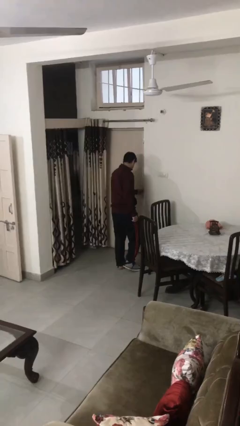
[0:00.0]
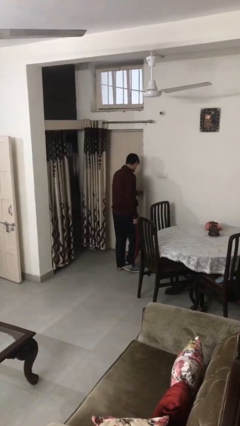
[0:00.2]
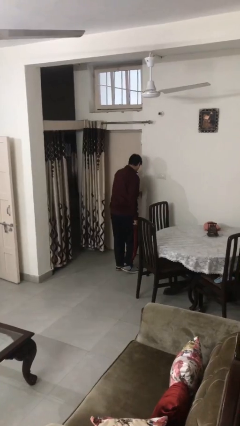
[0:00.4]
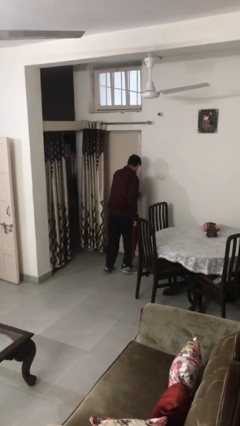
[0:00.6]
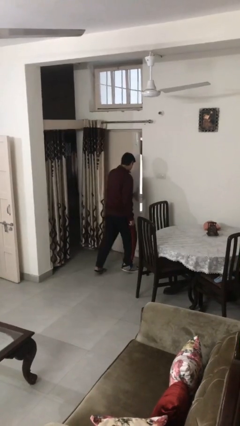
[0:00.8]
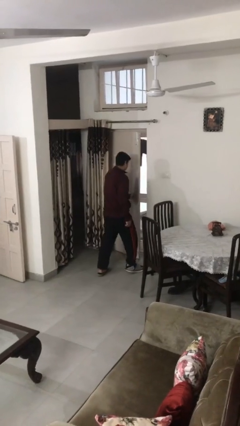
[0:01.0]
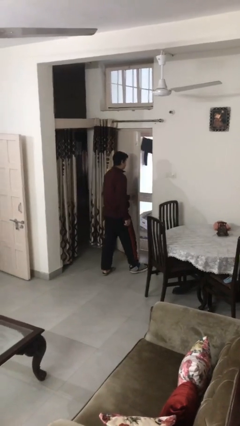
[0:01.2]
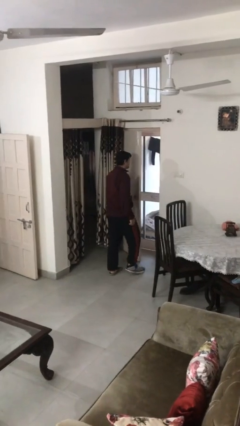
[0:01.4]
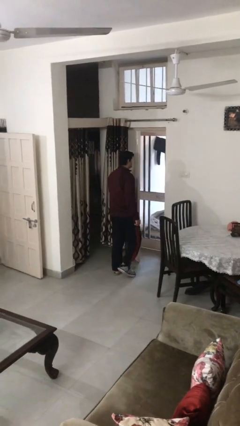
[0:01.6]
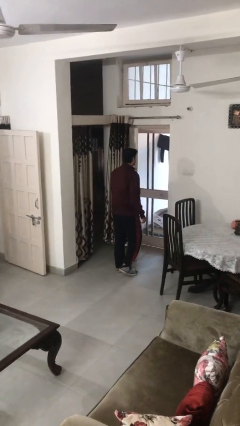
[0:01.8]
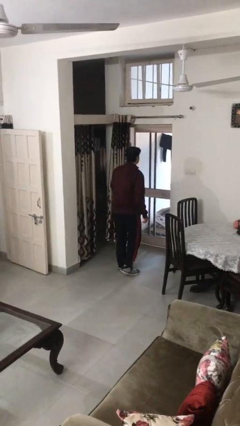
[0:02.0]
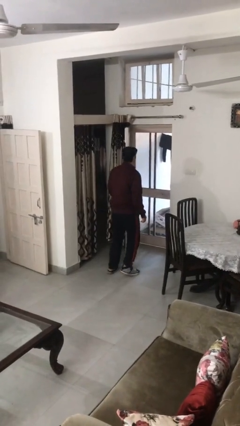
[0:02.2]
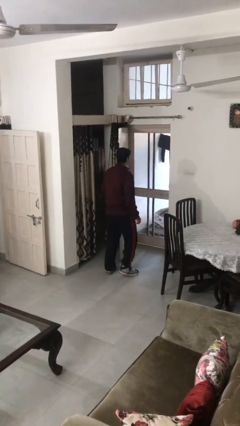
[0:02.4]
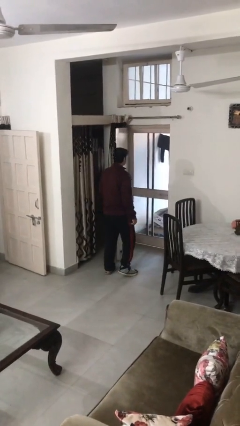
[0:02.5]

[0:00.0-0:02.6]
person opens facility door

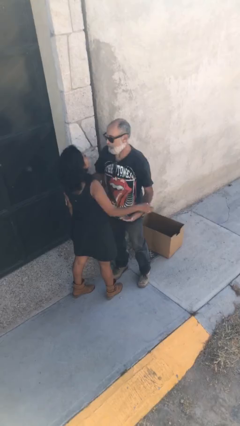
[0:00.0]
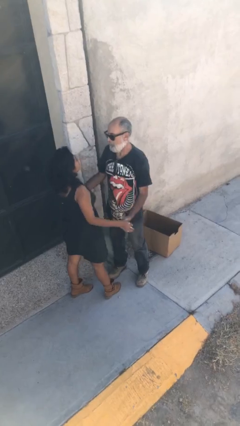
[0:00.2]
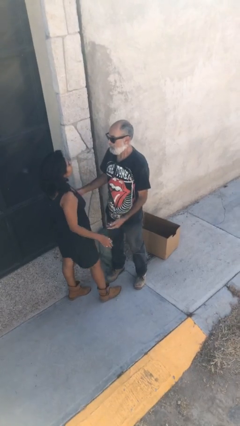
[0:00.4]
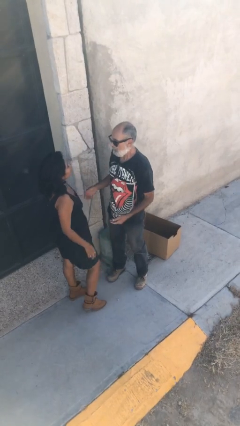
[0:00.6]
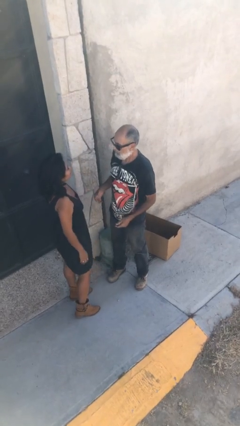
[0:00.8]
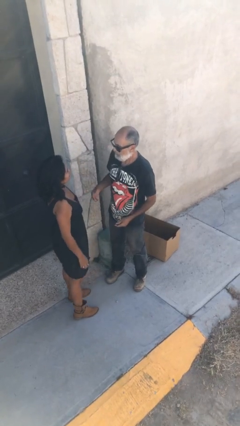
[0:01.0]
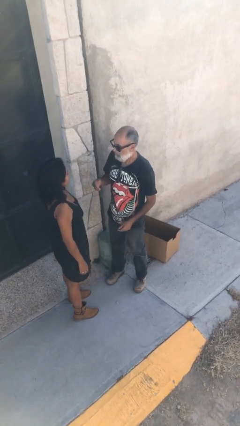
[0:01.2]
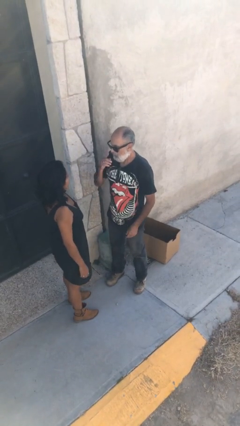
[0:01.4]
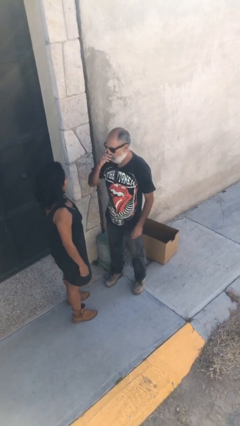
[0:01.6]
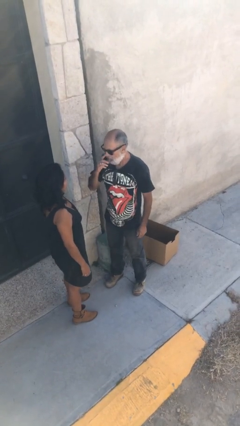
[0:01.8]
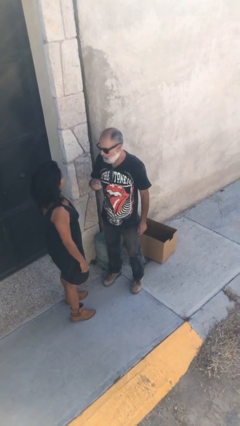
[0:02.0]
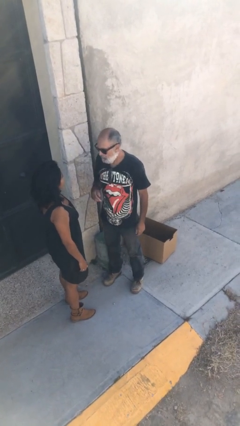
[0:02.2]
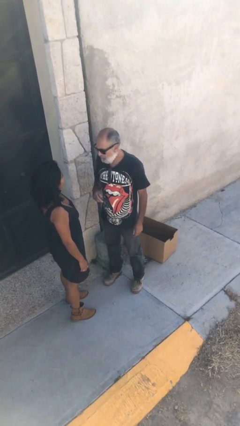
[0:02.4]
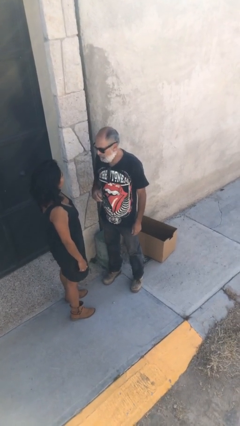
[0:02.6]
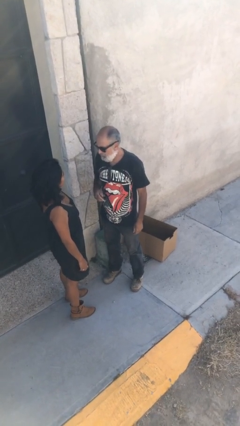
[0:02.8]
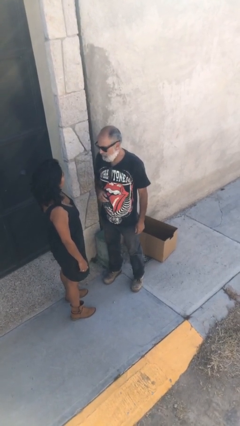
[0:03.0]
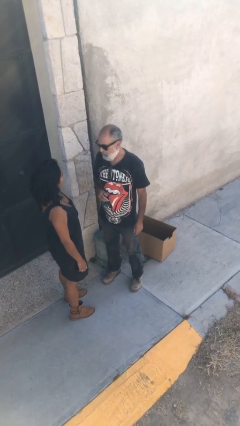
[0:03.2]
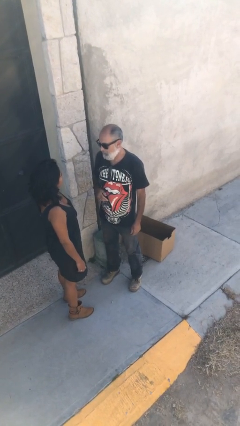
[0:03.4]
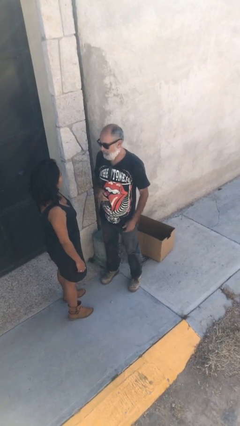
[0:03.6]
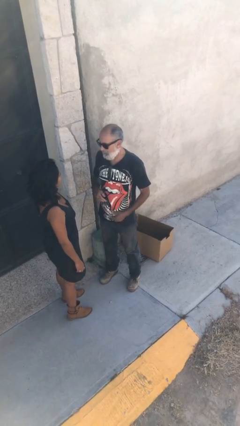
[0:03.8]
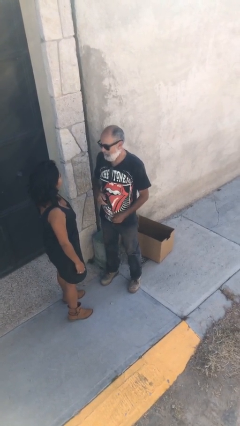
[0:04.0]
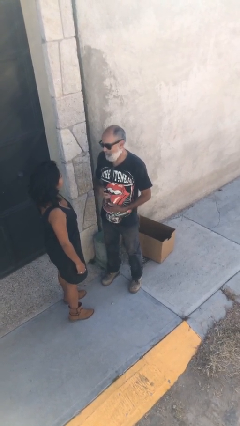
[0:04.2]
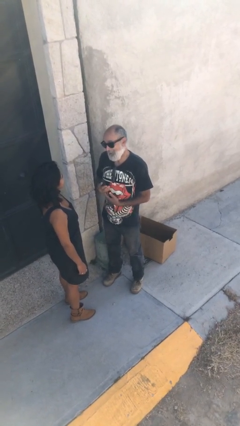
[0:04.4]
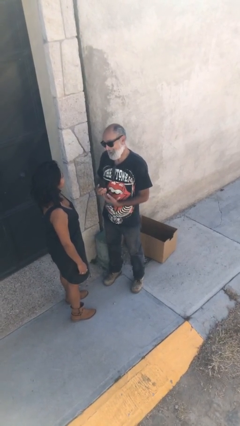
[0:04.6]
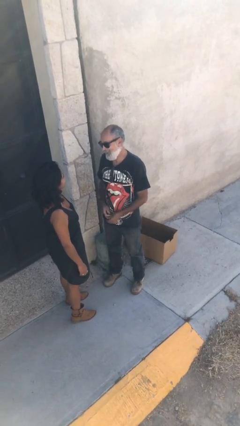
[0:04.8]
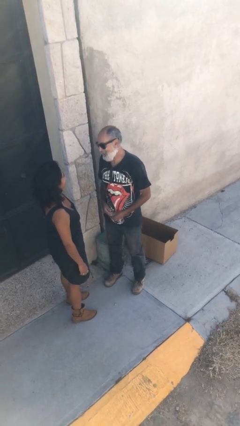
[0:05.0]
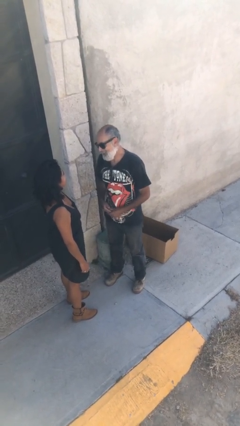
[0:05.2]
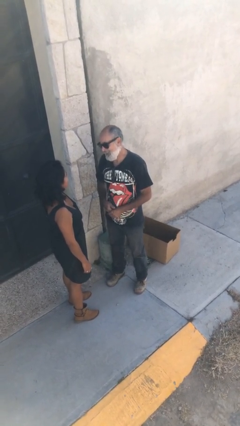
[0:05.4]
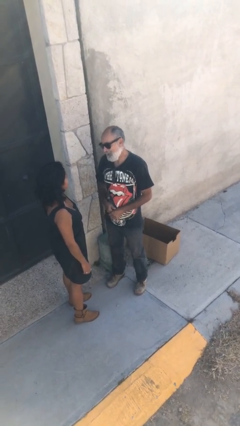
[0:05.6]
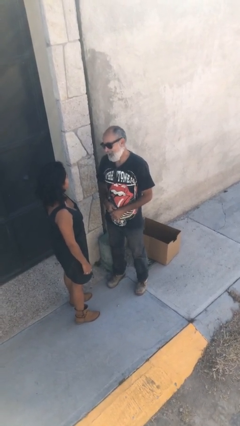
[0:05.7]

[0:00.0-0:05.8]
person talks to person

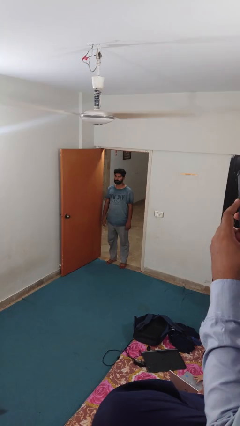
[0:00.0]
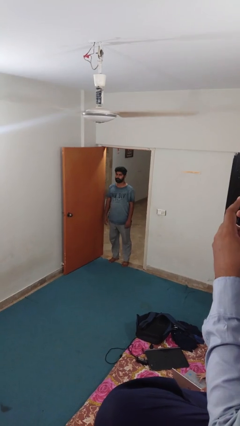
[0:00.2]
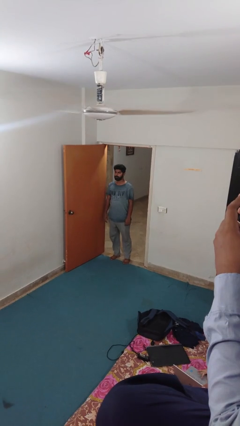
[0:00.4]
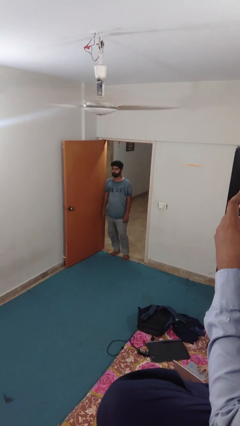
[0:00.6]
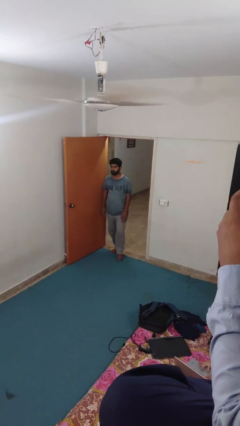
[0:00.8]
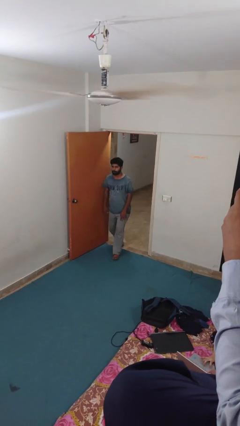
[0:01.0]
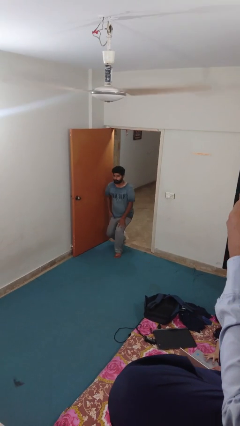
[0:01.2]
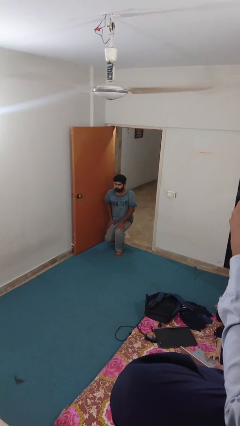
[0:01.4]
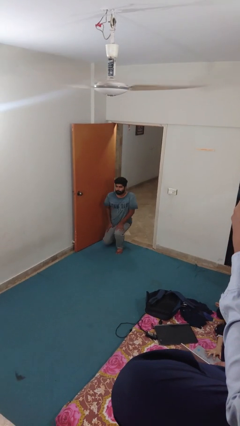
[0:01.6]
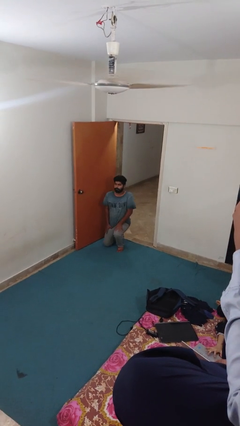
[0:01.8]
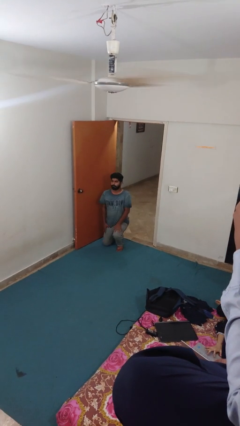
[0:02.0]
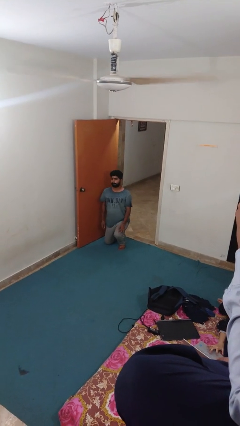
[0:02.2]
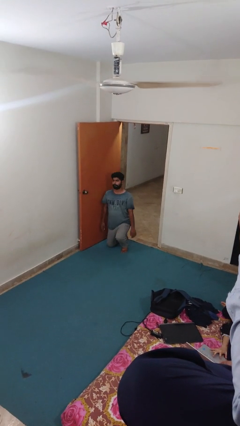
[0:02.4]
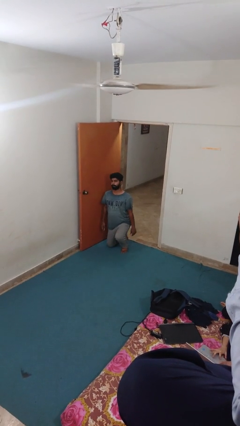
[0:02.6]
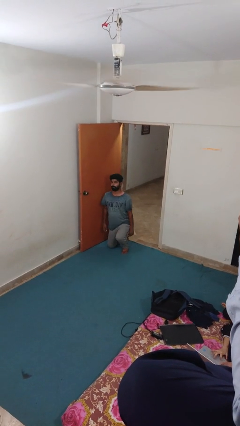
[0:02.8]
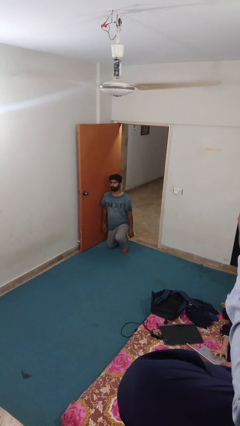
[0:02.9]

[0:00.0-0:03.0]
person kneels

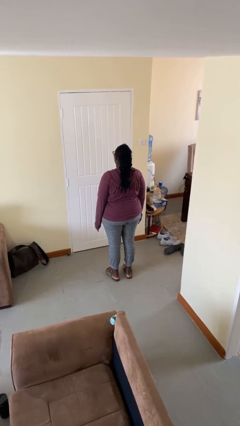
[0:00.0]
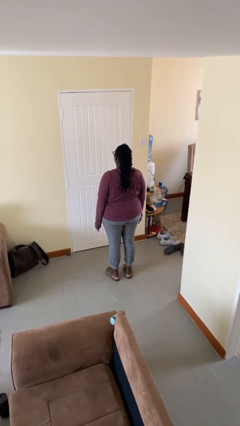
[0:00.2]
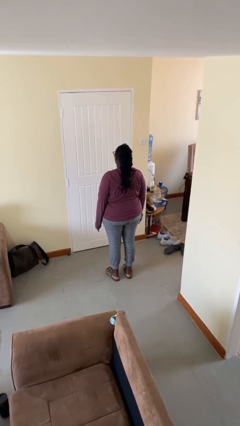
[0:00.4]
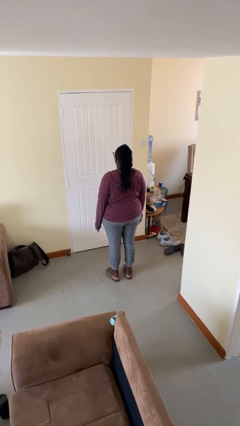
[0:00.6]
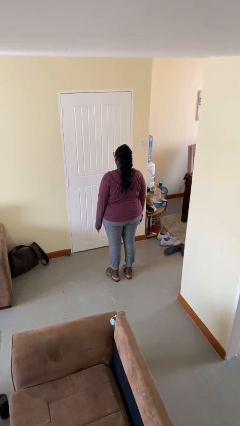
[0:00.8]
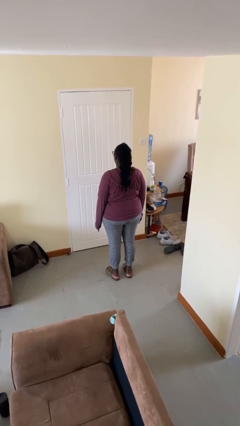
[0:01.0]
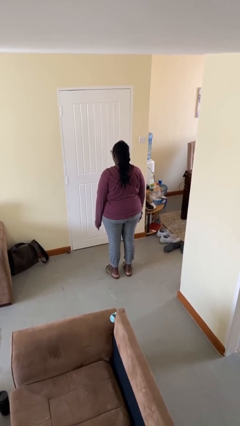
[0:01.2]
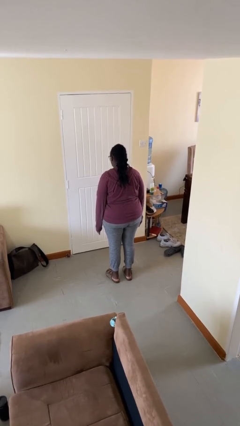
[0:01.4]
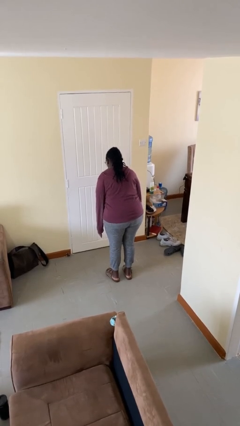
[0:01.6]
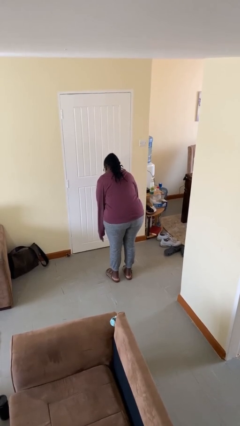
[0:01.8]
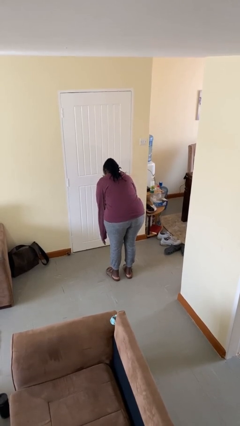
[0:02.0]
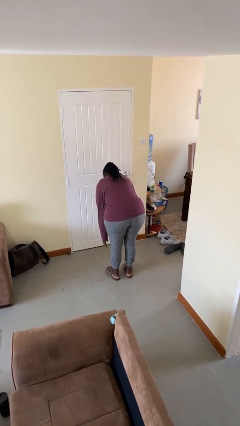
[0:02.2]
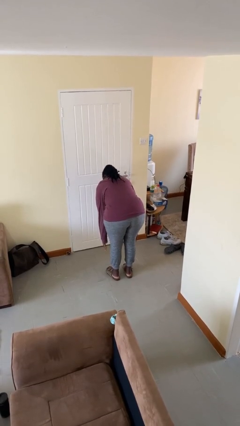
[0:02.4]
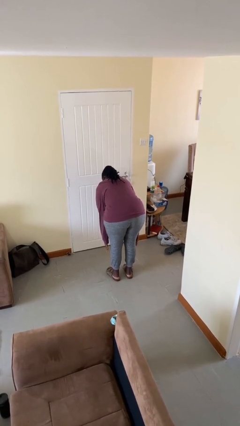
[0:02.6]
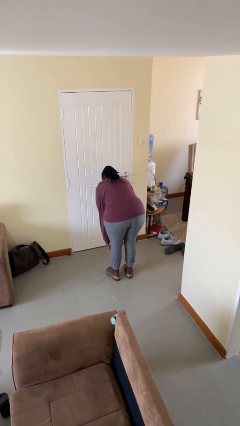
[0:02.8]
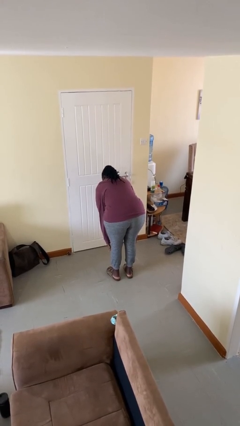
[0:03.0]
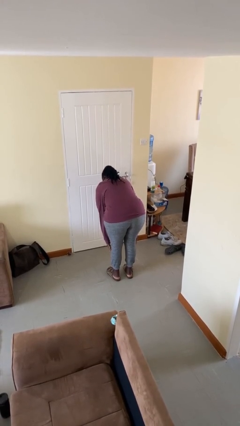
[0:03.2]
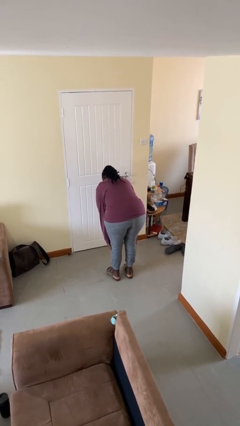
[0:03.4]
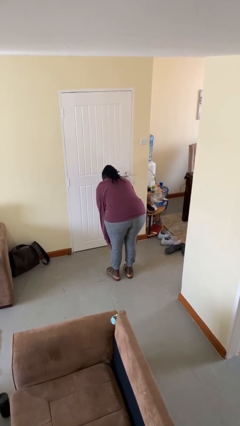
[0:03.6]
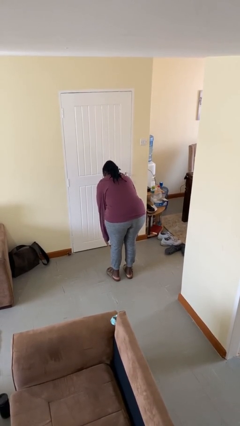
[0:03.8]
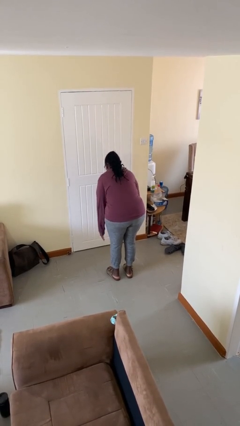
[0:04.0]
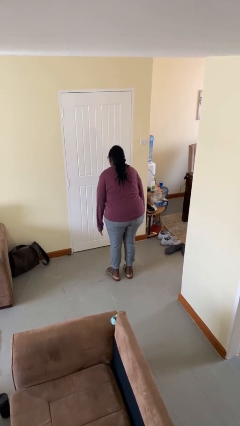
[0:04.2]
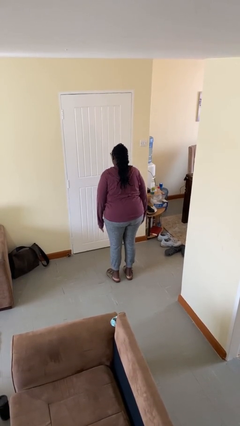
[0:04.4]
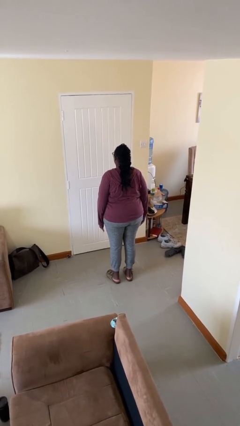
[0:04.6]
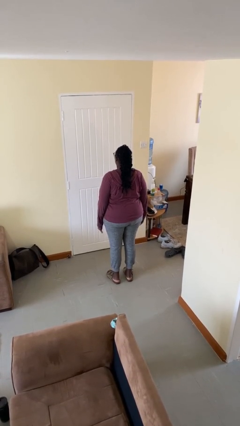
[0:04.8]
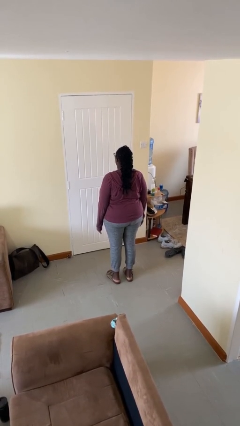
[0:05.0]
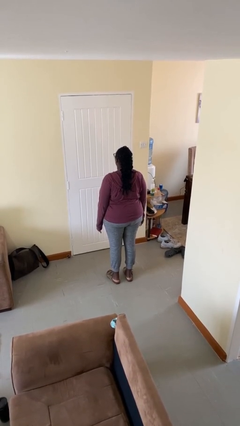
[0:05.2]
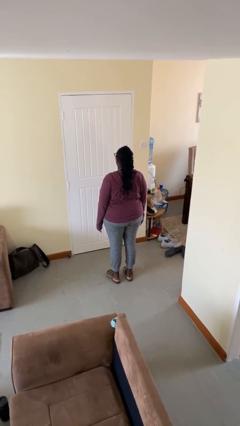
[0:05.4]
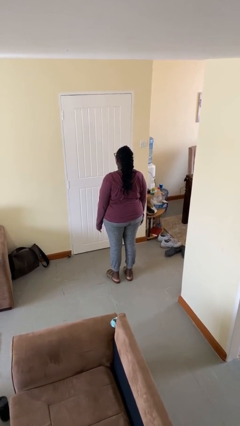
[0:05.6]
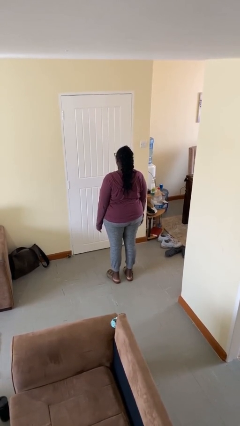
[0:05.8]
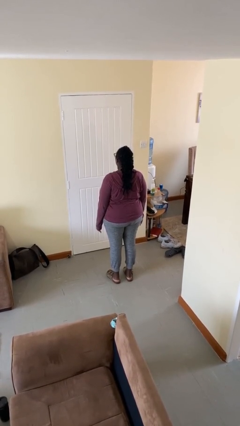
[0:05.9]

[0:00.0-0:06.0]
person bows

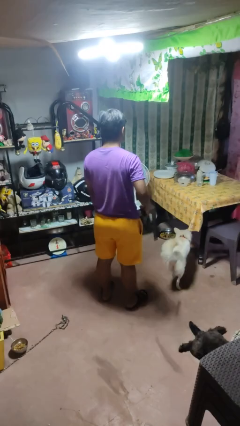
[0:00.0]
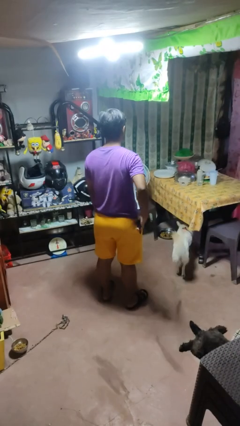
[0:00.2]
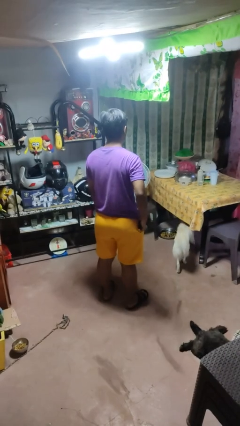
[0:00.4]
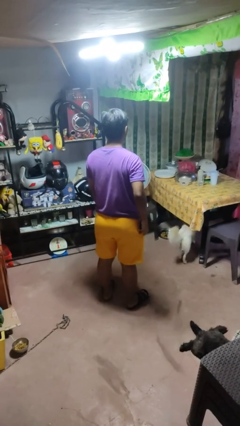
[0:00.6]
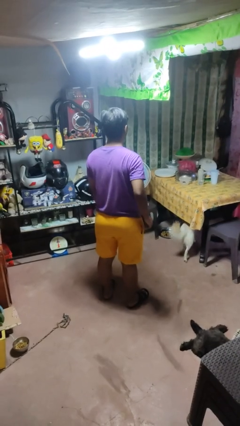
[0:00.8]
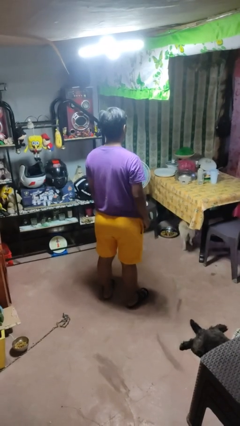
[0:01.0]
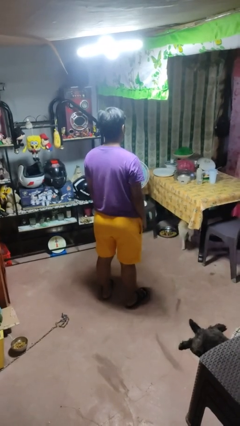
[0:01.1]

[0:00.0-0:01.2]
person puts phone into pocket
